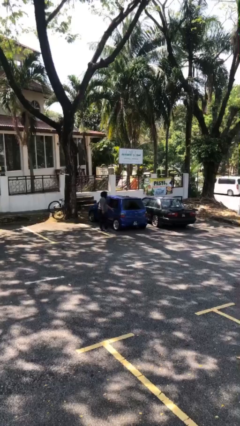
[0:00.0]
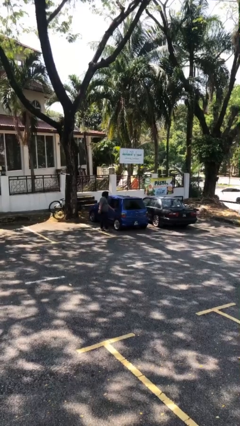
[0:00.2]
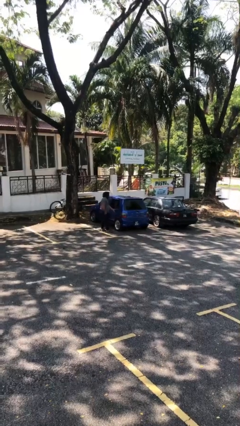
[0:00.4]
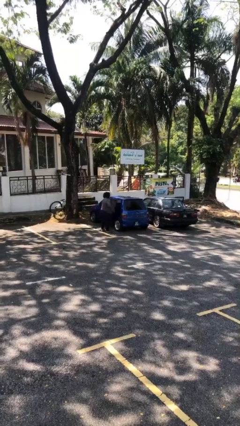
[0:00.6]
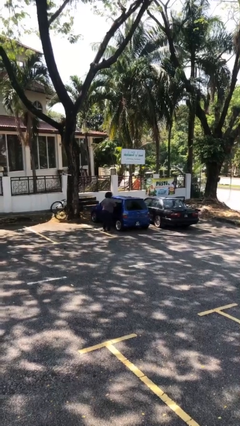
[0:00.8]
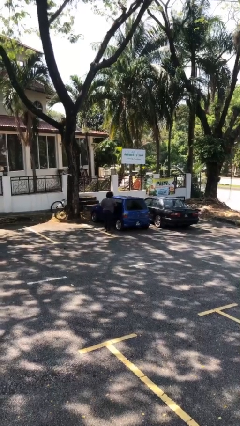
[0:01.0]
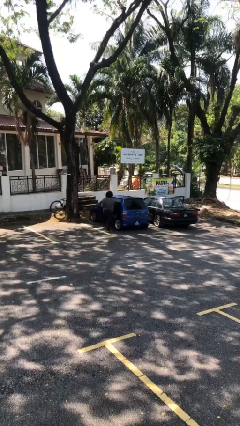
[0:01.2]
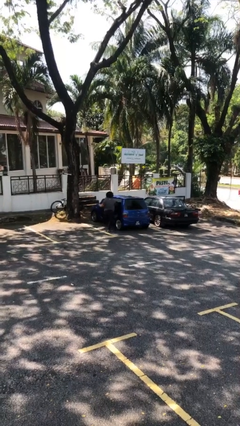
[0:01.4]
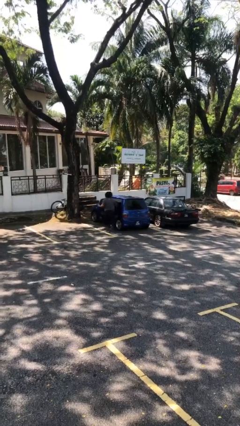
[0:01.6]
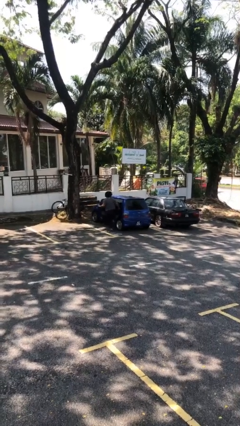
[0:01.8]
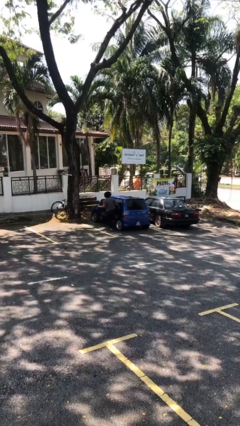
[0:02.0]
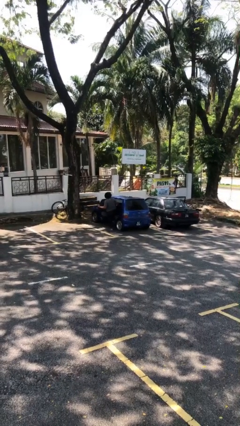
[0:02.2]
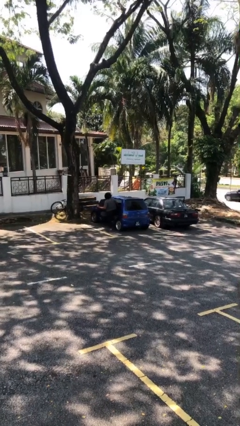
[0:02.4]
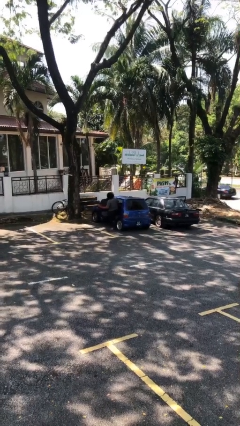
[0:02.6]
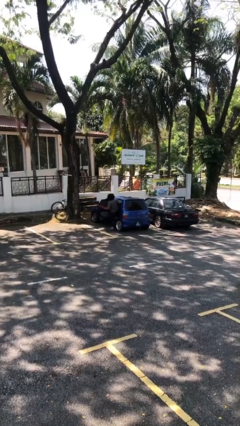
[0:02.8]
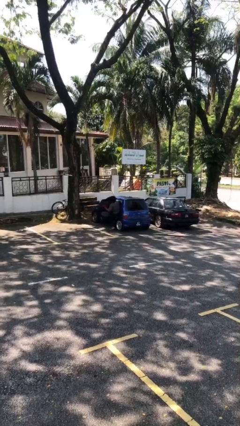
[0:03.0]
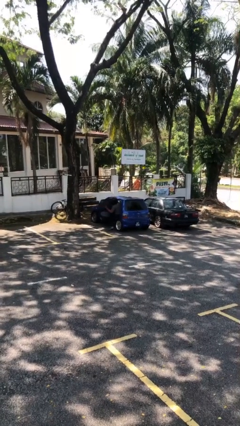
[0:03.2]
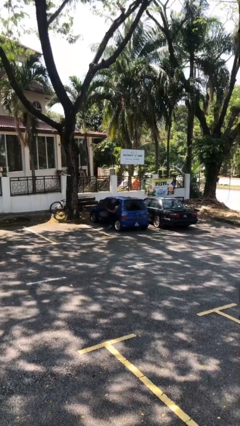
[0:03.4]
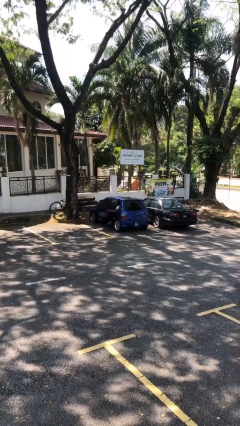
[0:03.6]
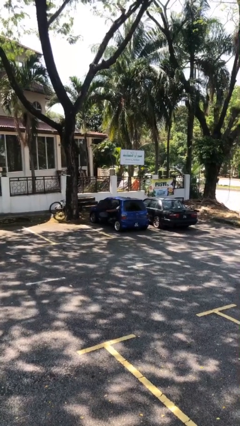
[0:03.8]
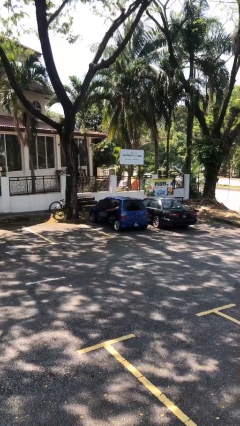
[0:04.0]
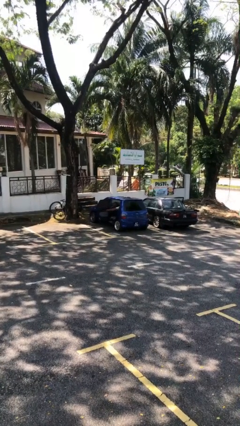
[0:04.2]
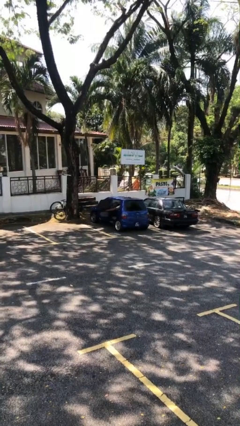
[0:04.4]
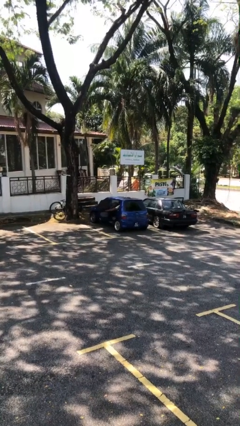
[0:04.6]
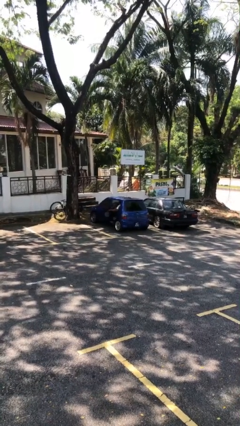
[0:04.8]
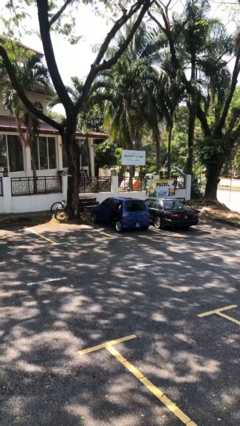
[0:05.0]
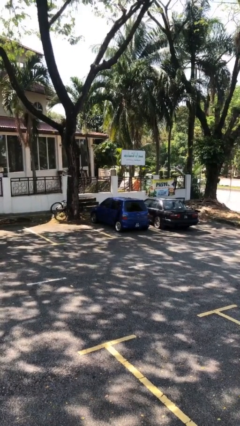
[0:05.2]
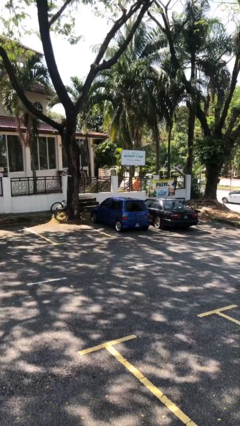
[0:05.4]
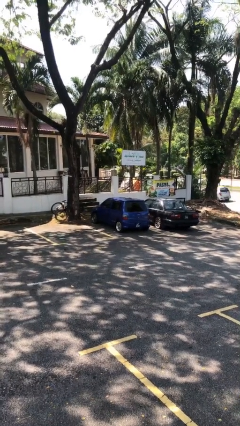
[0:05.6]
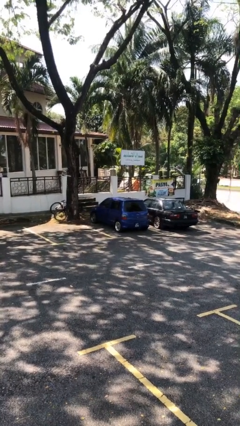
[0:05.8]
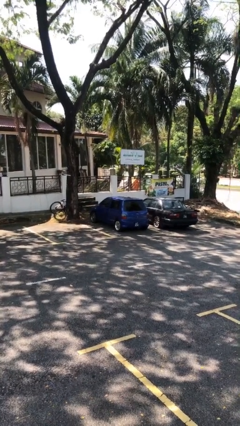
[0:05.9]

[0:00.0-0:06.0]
car picks up person

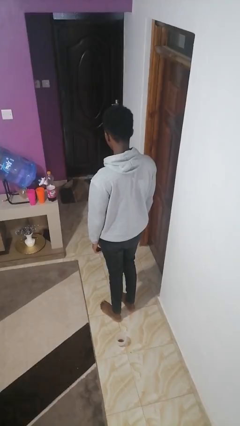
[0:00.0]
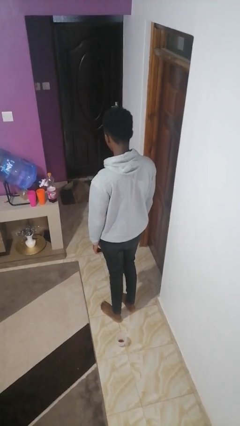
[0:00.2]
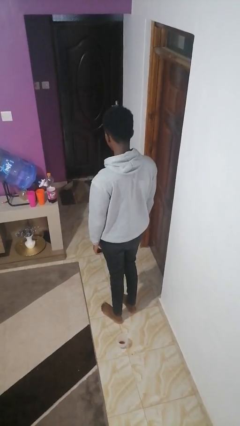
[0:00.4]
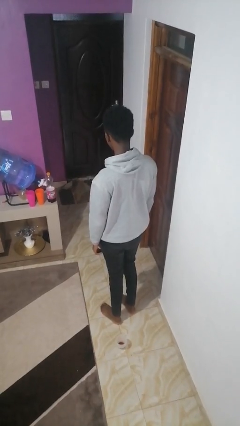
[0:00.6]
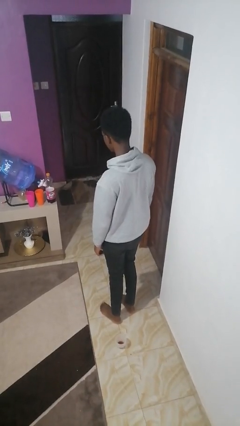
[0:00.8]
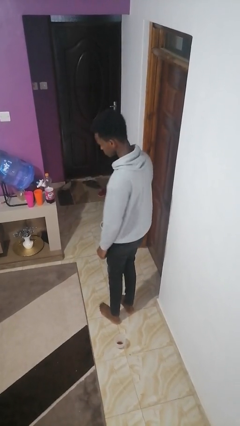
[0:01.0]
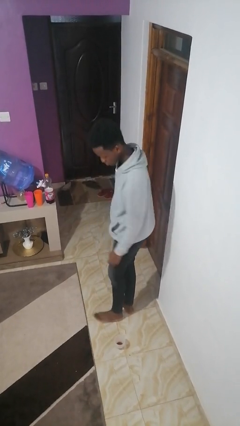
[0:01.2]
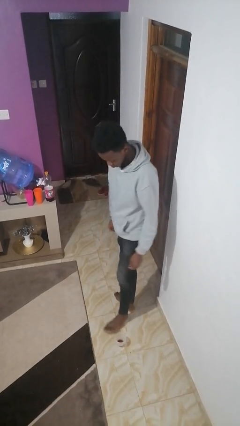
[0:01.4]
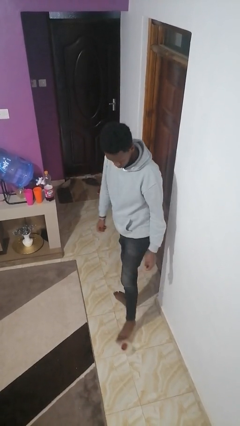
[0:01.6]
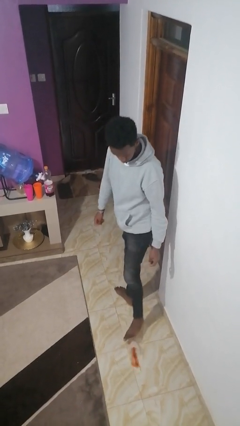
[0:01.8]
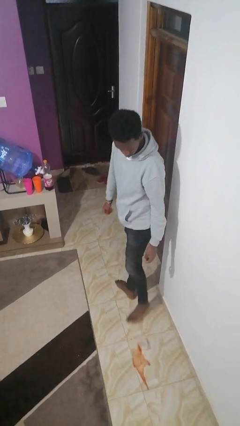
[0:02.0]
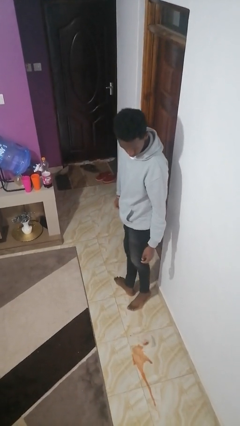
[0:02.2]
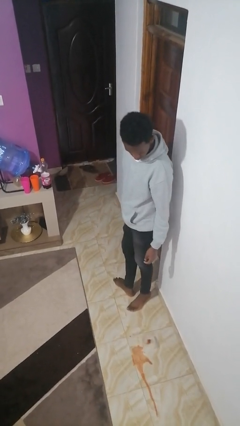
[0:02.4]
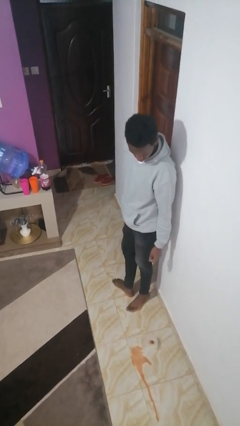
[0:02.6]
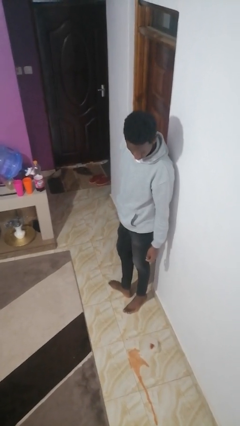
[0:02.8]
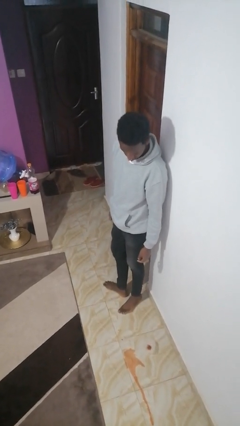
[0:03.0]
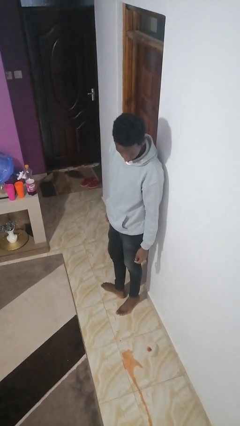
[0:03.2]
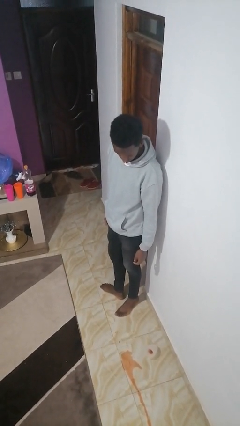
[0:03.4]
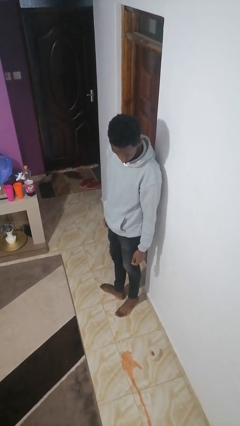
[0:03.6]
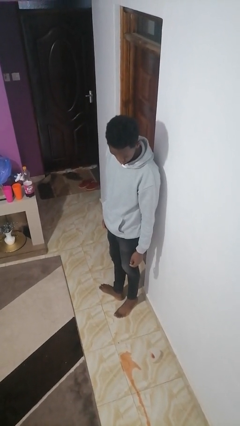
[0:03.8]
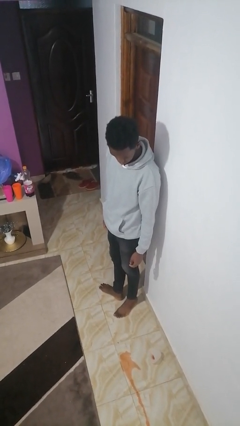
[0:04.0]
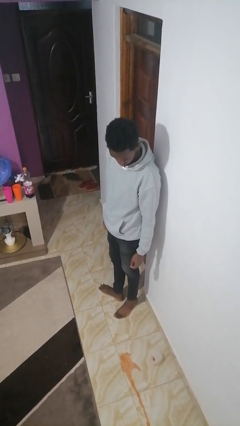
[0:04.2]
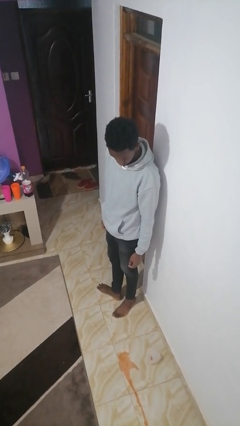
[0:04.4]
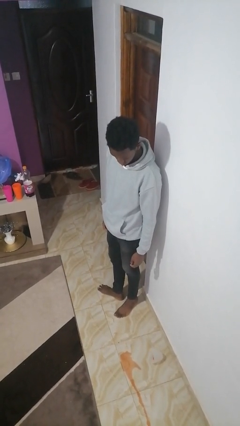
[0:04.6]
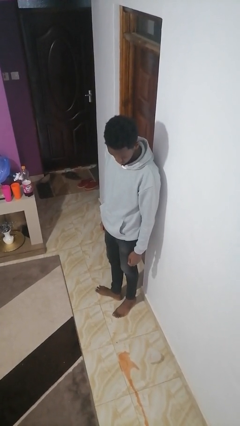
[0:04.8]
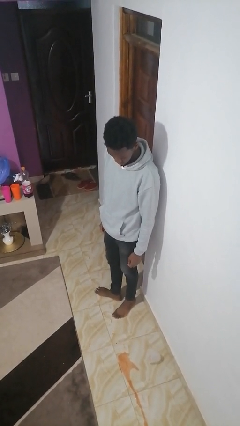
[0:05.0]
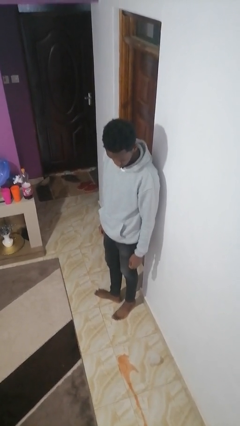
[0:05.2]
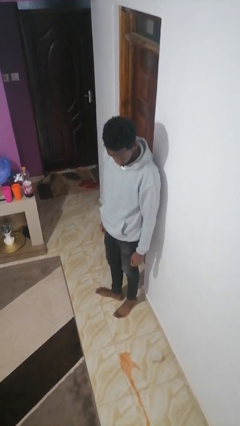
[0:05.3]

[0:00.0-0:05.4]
person spills on floor

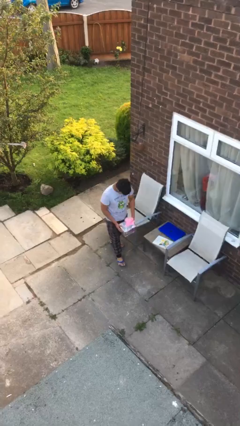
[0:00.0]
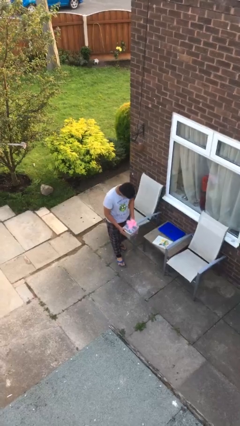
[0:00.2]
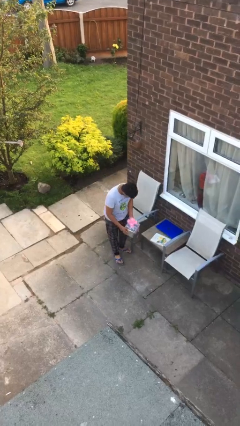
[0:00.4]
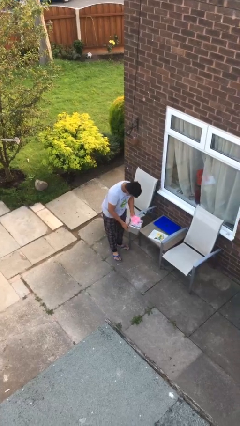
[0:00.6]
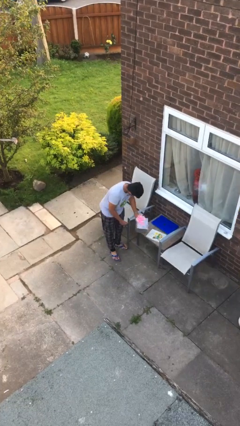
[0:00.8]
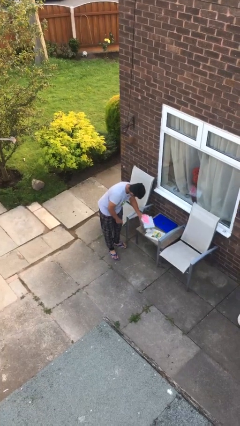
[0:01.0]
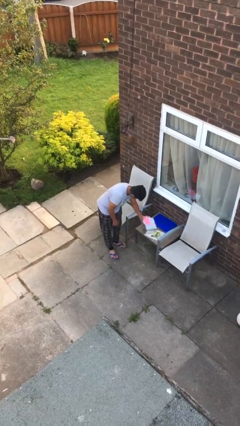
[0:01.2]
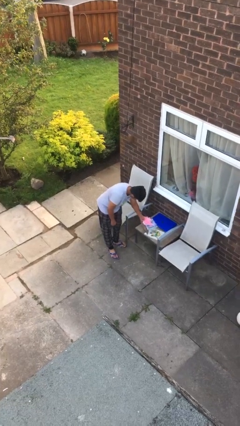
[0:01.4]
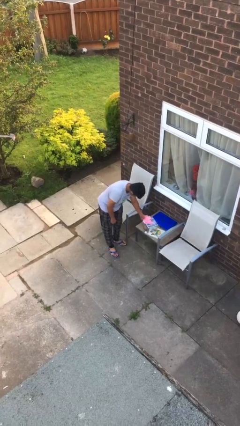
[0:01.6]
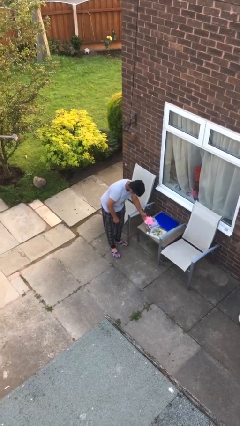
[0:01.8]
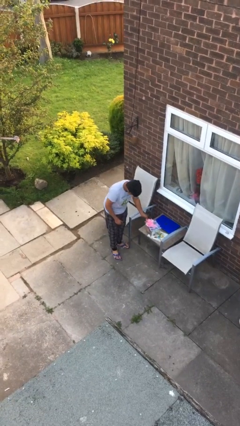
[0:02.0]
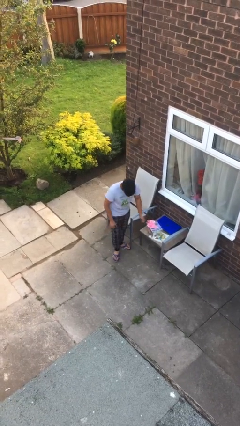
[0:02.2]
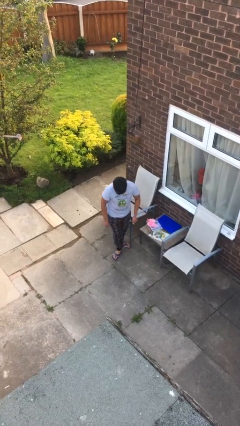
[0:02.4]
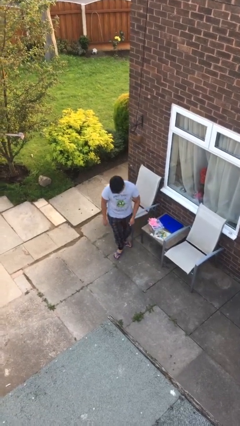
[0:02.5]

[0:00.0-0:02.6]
person puts down object on table

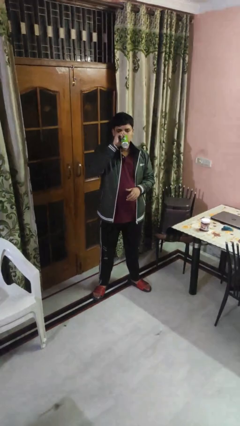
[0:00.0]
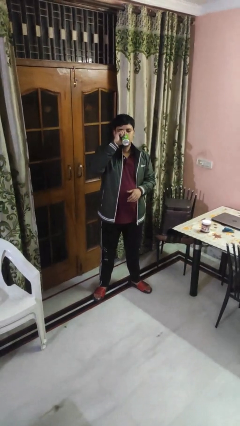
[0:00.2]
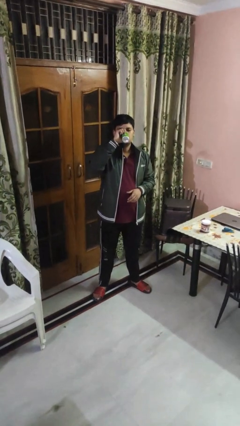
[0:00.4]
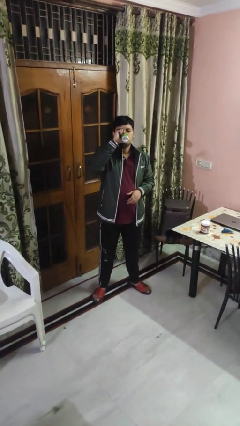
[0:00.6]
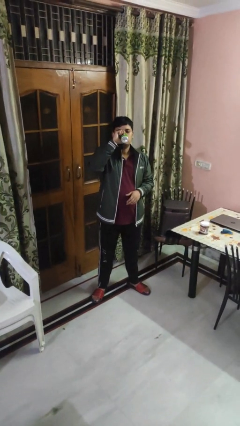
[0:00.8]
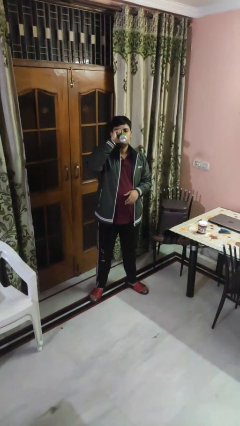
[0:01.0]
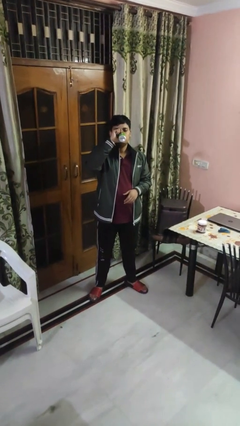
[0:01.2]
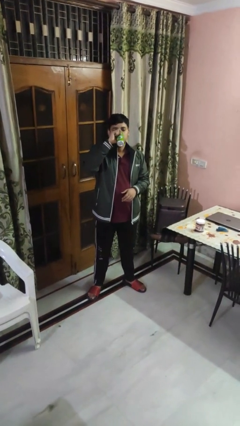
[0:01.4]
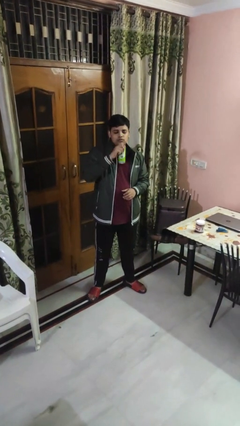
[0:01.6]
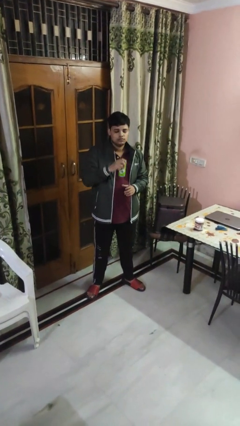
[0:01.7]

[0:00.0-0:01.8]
person drinks from beverage can

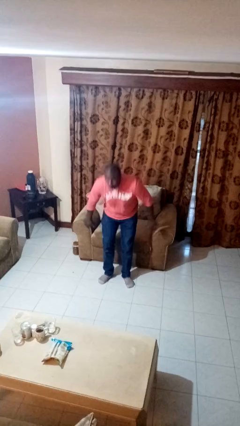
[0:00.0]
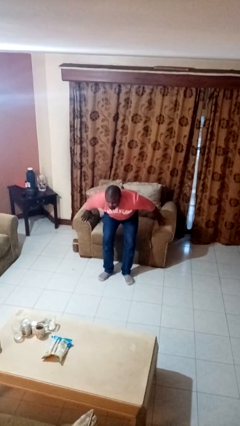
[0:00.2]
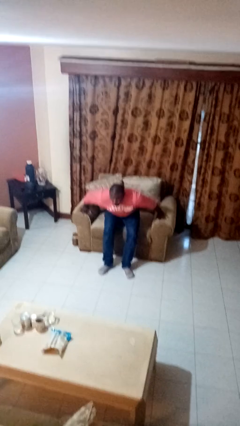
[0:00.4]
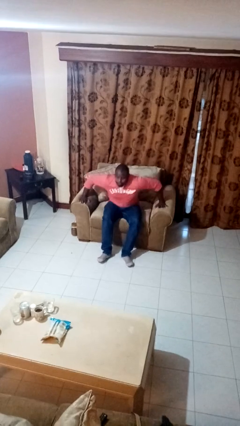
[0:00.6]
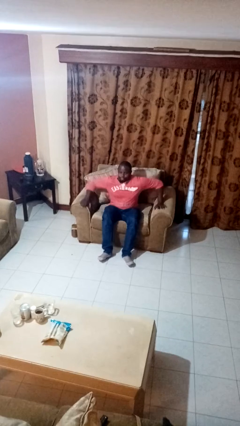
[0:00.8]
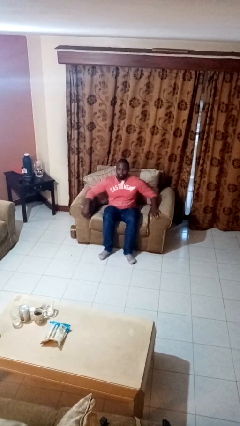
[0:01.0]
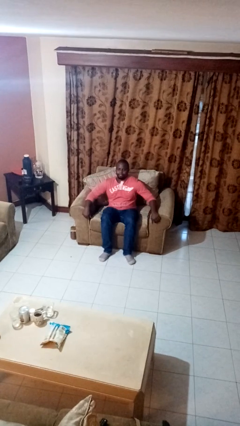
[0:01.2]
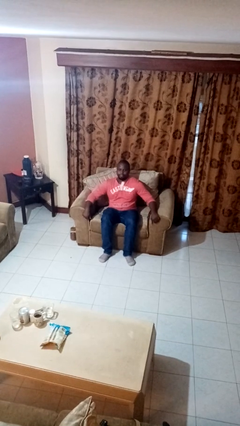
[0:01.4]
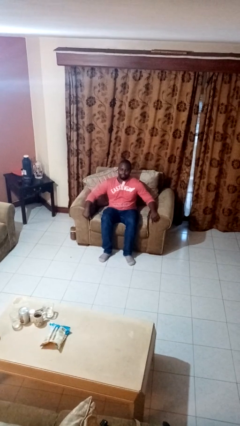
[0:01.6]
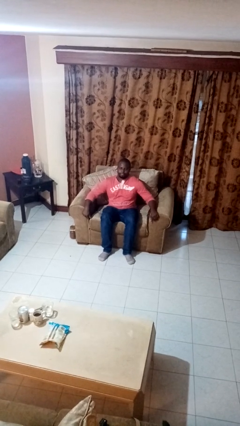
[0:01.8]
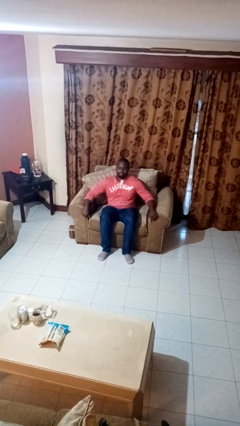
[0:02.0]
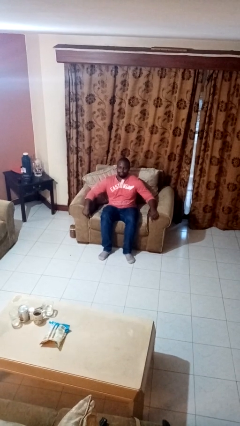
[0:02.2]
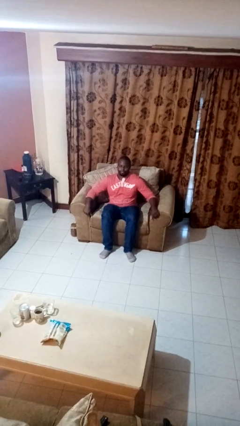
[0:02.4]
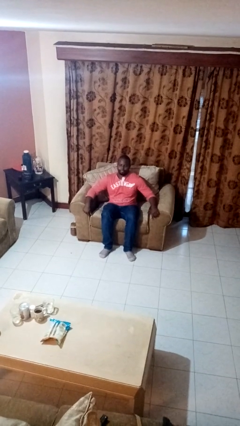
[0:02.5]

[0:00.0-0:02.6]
person sits down
